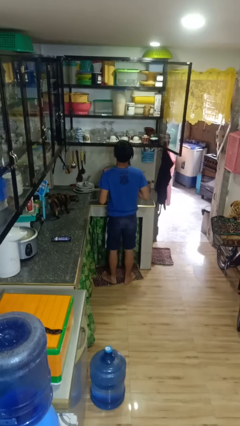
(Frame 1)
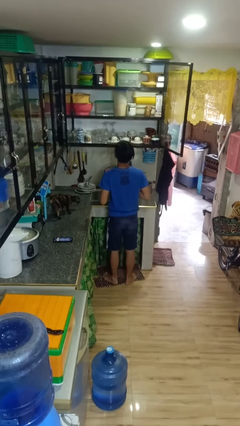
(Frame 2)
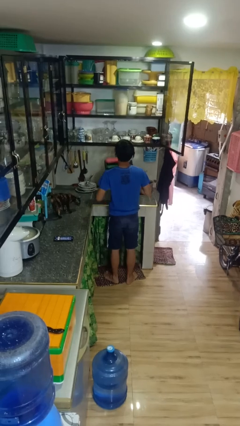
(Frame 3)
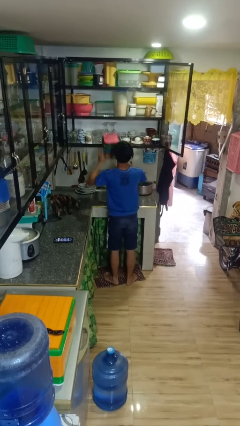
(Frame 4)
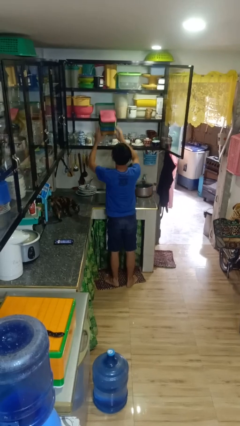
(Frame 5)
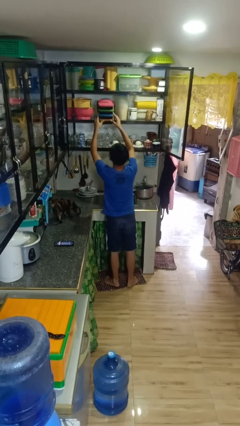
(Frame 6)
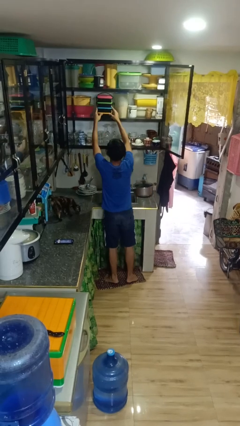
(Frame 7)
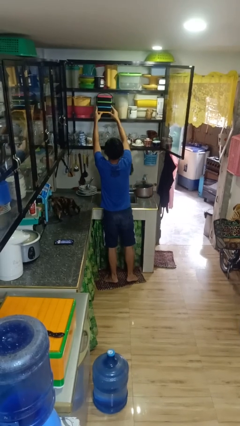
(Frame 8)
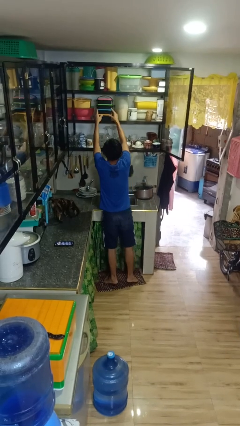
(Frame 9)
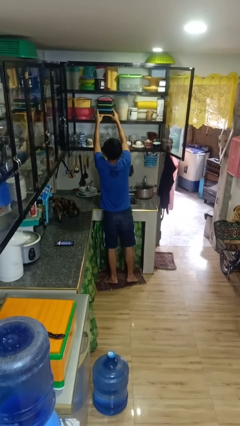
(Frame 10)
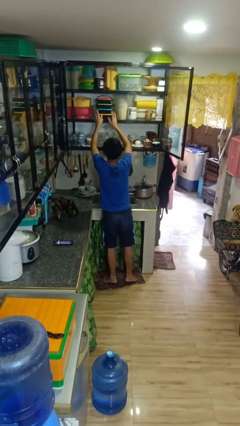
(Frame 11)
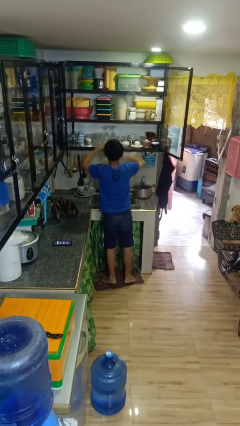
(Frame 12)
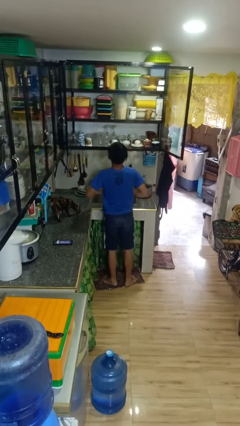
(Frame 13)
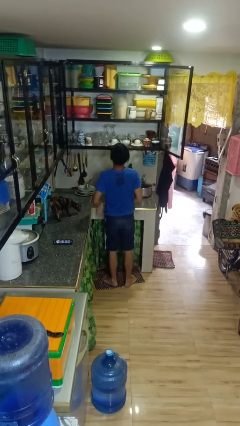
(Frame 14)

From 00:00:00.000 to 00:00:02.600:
person puts down object into cabinet

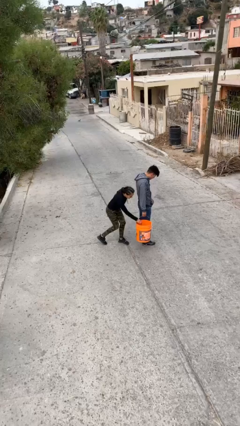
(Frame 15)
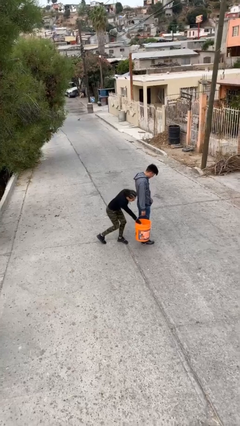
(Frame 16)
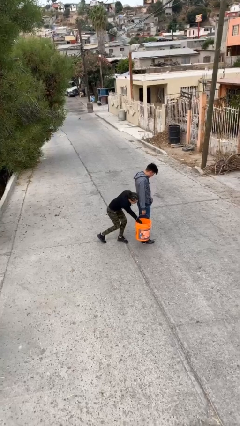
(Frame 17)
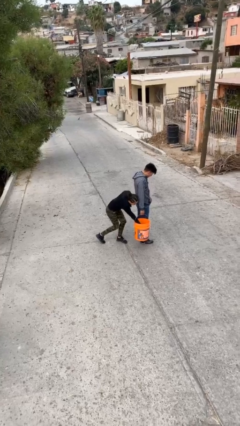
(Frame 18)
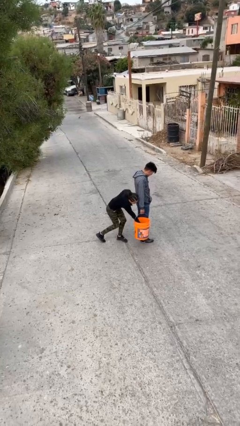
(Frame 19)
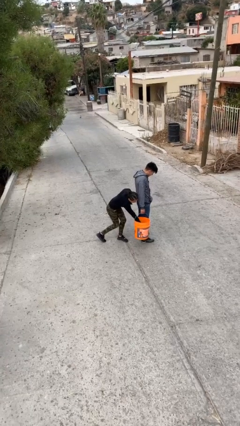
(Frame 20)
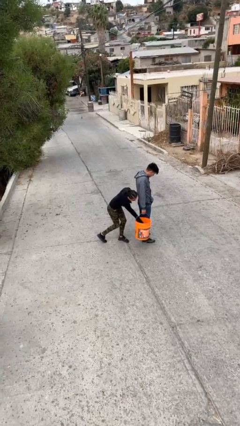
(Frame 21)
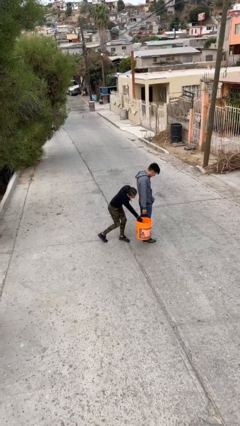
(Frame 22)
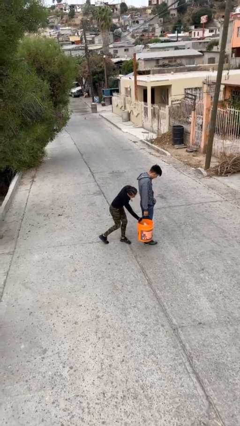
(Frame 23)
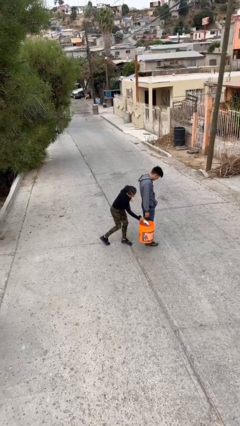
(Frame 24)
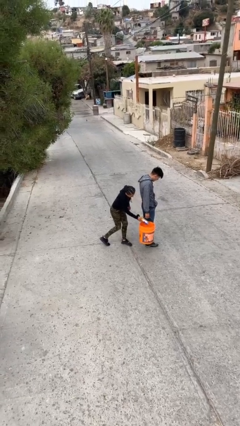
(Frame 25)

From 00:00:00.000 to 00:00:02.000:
person steals object from person

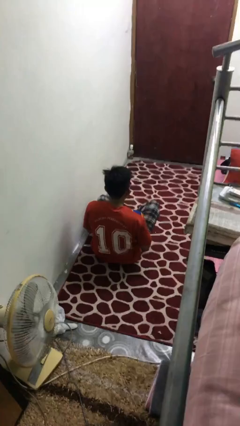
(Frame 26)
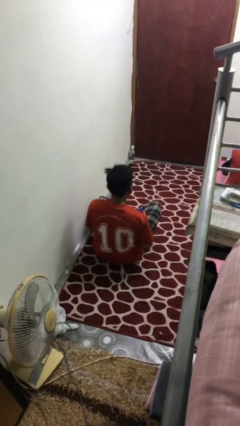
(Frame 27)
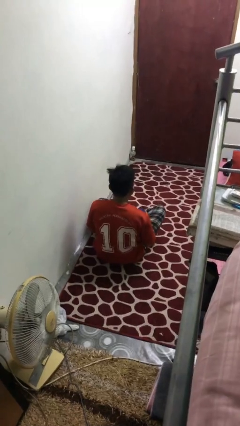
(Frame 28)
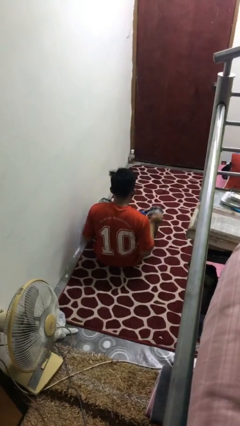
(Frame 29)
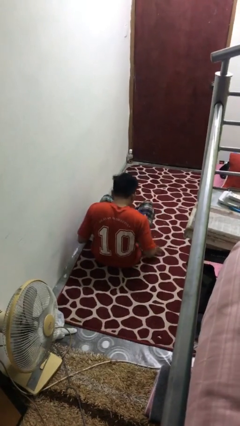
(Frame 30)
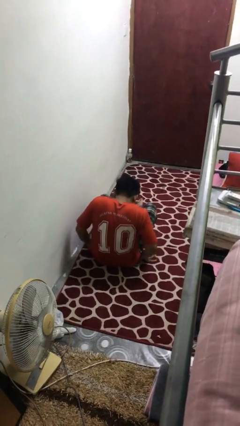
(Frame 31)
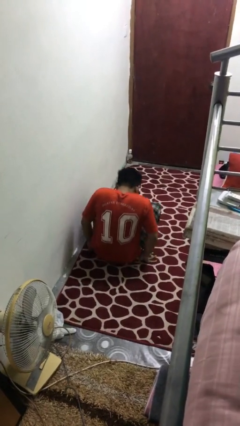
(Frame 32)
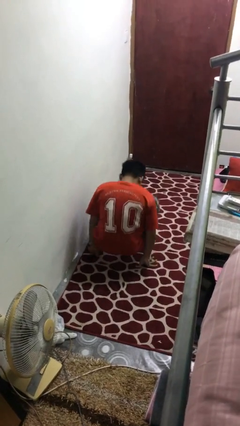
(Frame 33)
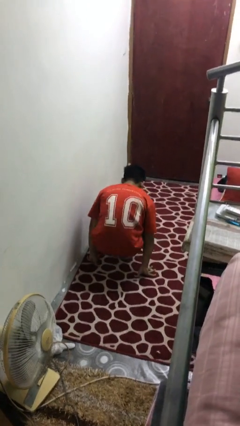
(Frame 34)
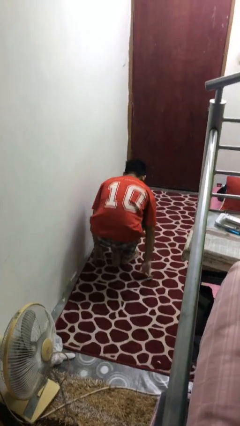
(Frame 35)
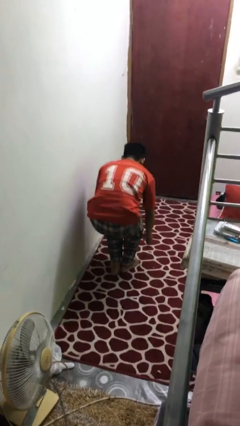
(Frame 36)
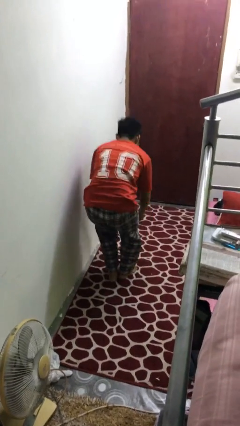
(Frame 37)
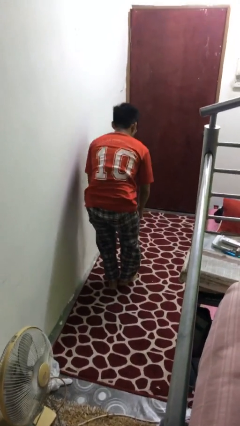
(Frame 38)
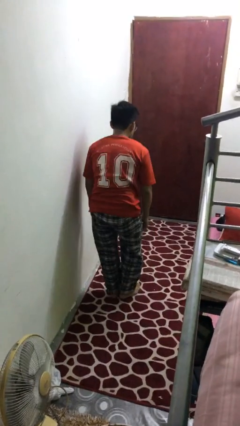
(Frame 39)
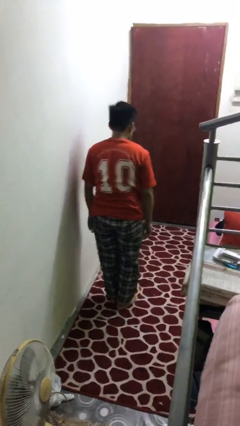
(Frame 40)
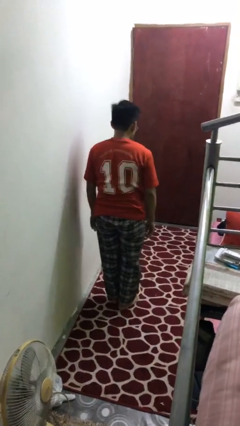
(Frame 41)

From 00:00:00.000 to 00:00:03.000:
person stands up from floor

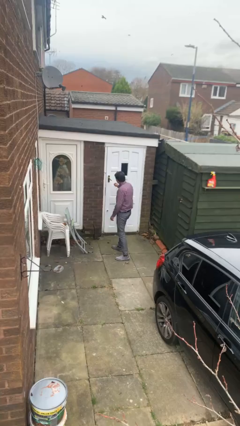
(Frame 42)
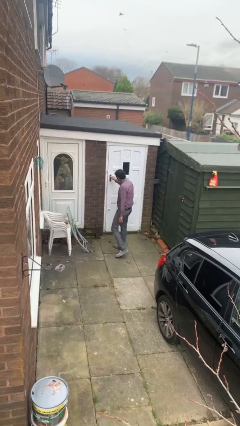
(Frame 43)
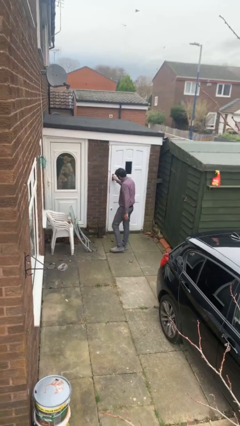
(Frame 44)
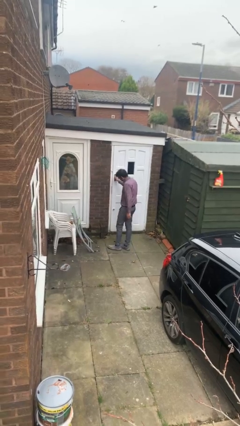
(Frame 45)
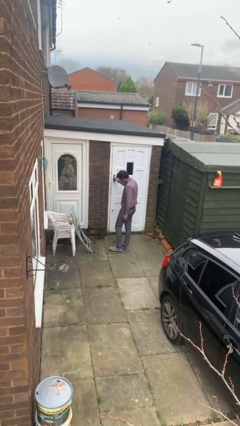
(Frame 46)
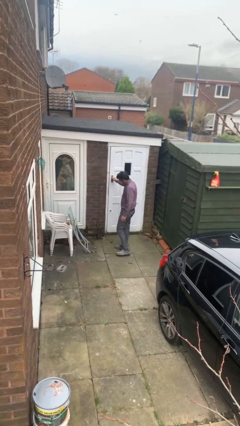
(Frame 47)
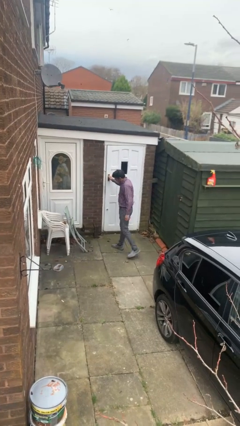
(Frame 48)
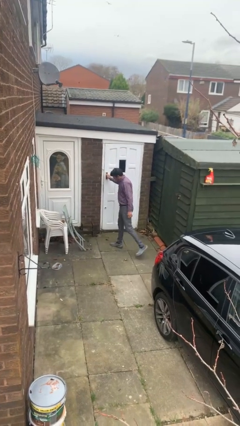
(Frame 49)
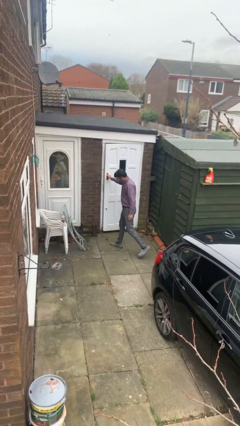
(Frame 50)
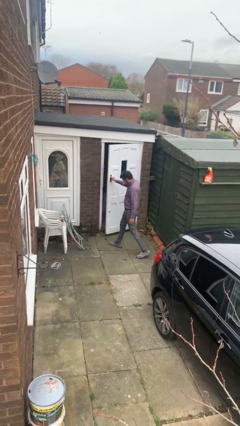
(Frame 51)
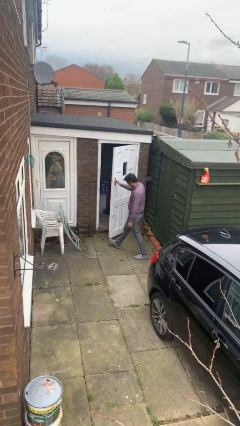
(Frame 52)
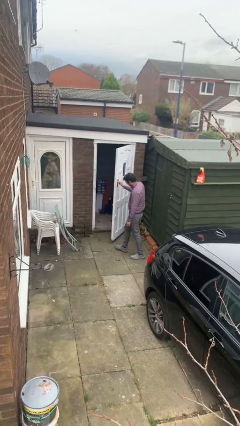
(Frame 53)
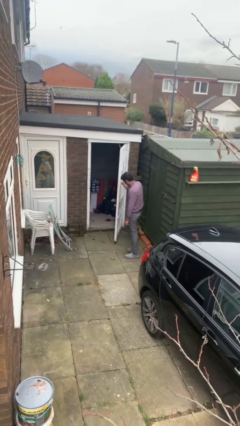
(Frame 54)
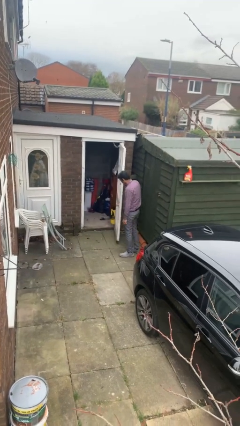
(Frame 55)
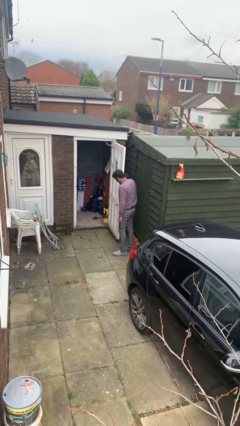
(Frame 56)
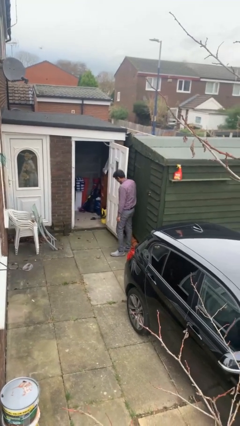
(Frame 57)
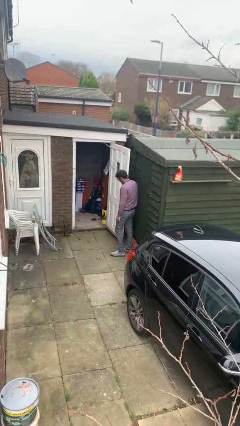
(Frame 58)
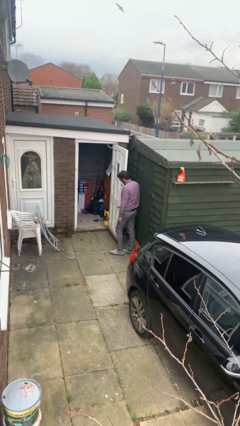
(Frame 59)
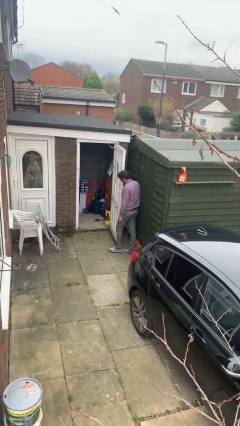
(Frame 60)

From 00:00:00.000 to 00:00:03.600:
person opens facility door

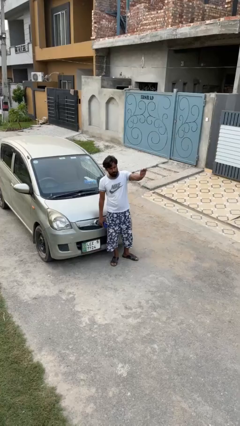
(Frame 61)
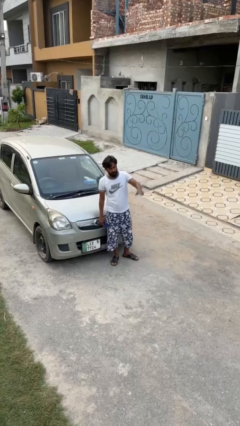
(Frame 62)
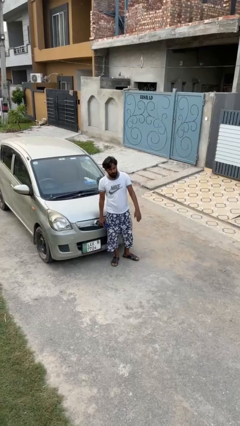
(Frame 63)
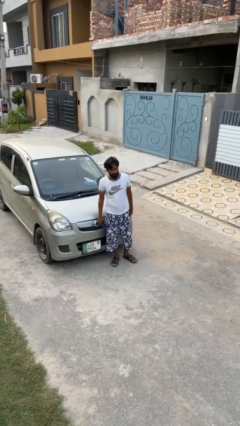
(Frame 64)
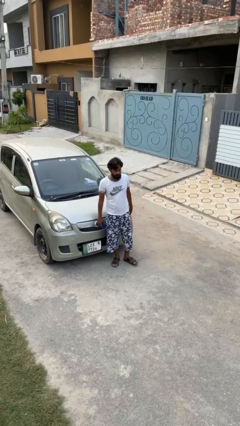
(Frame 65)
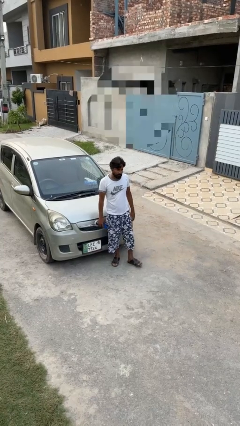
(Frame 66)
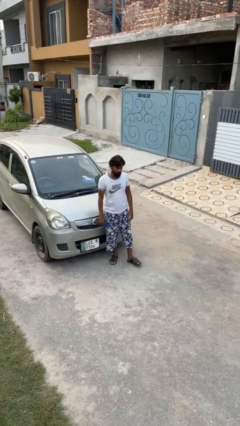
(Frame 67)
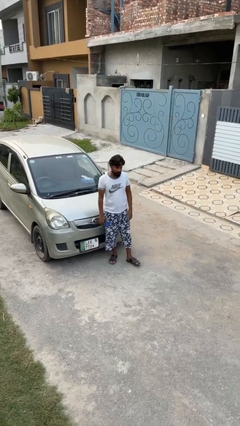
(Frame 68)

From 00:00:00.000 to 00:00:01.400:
person gestures lower hand

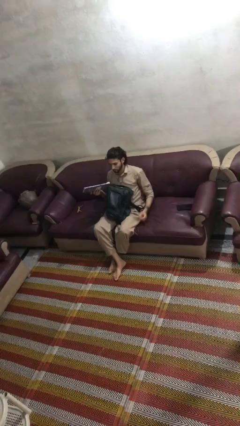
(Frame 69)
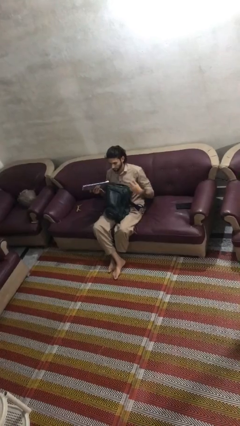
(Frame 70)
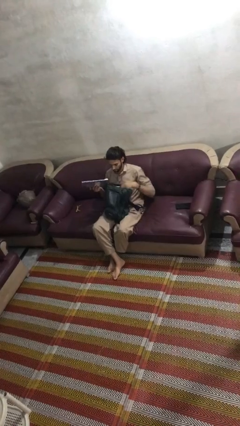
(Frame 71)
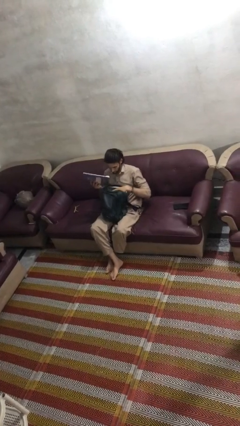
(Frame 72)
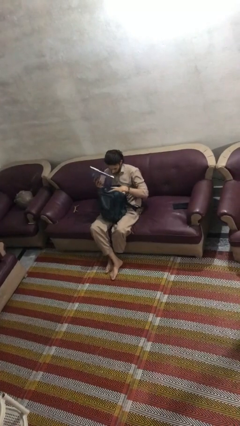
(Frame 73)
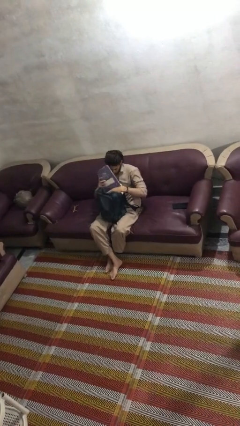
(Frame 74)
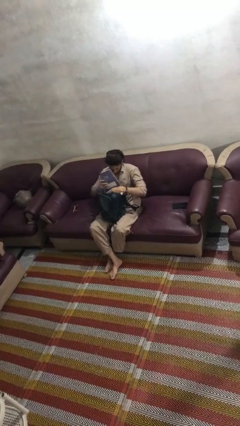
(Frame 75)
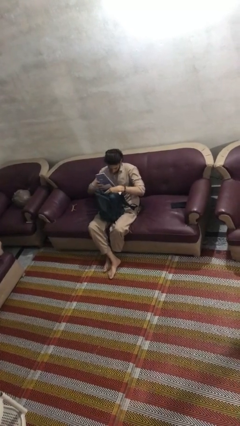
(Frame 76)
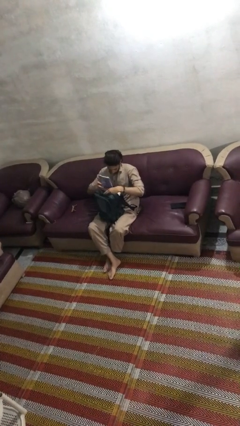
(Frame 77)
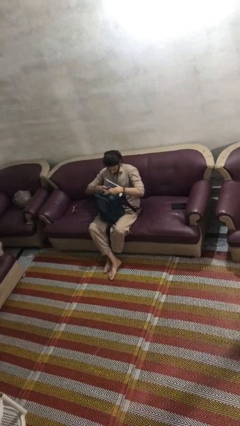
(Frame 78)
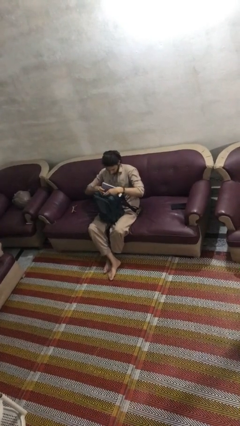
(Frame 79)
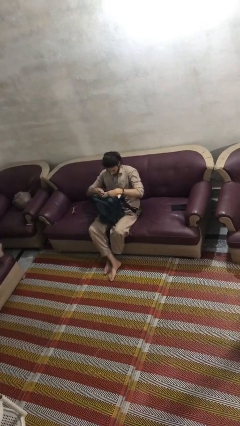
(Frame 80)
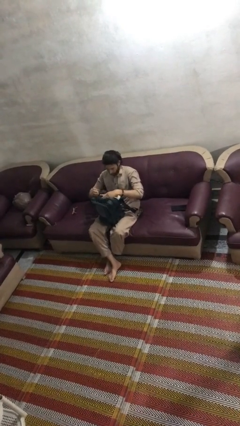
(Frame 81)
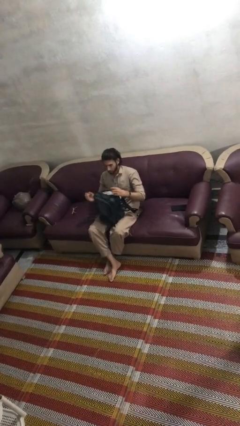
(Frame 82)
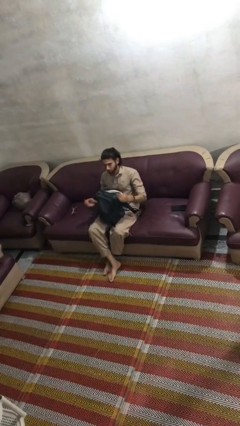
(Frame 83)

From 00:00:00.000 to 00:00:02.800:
person puts object into backpack

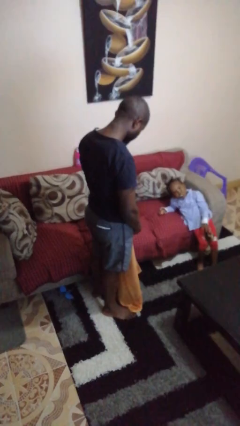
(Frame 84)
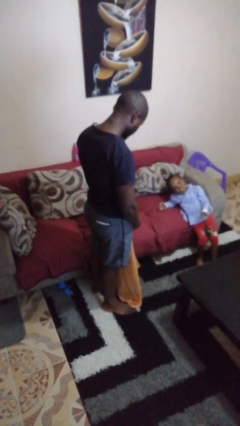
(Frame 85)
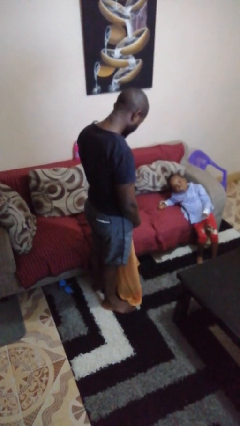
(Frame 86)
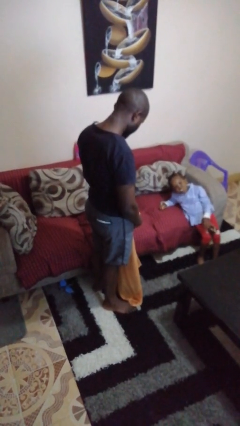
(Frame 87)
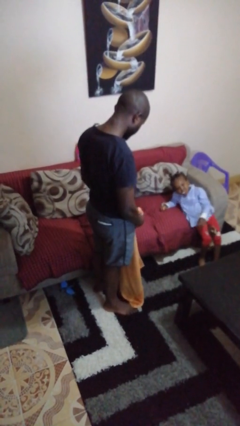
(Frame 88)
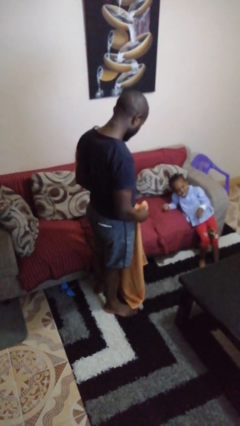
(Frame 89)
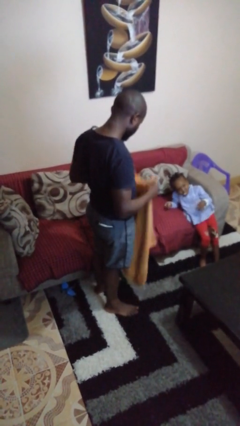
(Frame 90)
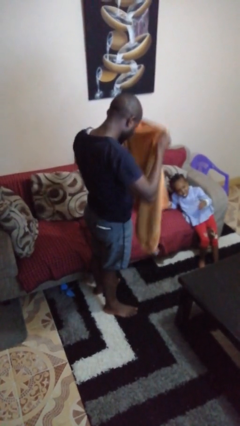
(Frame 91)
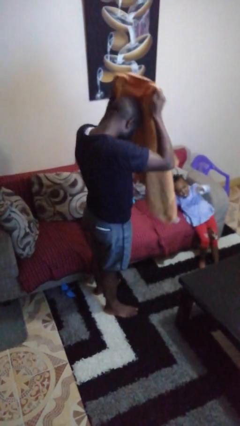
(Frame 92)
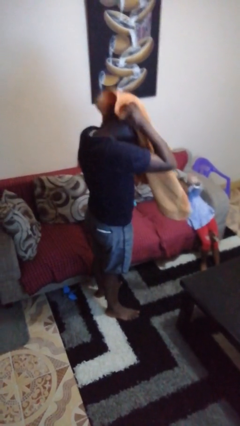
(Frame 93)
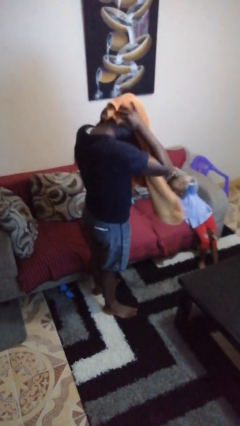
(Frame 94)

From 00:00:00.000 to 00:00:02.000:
person dries hair with towel
